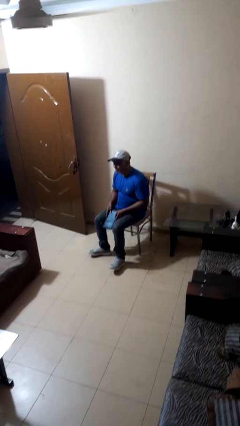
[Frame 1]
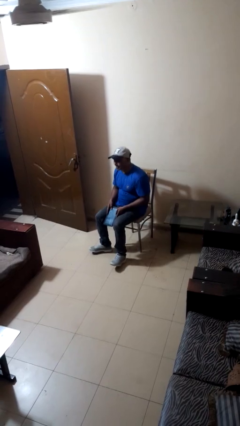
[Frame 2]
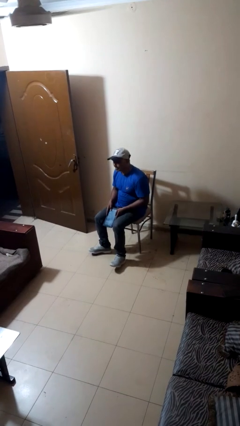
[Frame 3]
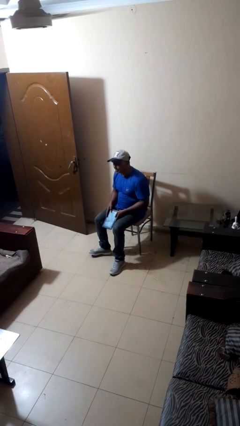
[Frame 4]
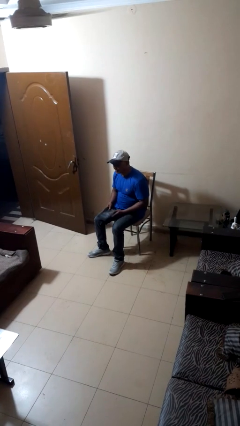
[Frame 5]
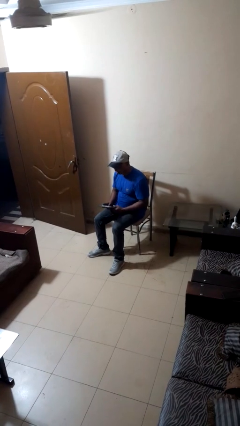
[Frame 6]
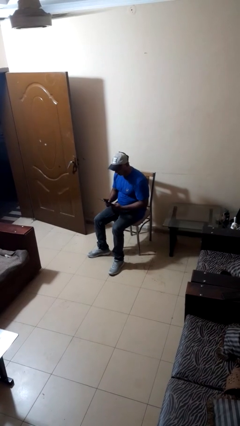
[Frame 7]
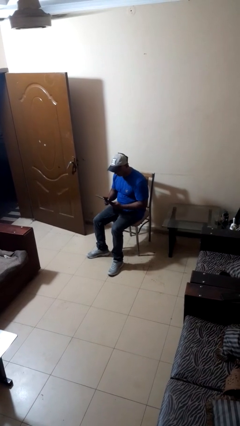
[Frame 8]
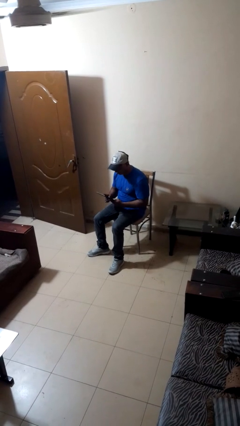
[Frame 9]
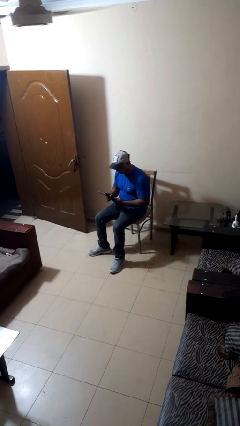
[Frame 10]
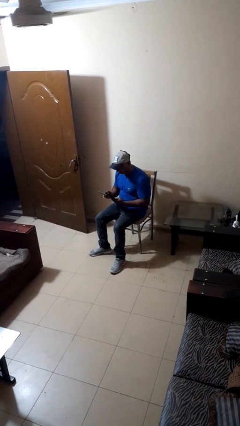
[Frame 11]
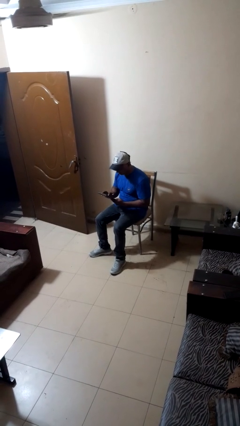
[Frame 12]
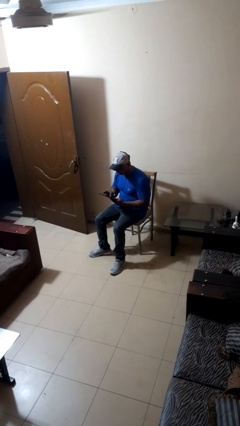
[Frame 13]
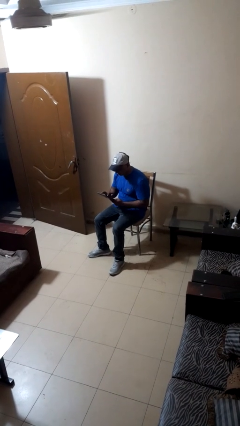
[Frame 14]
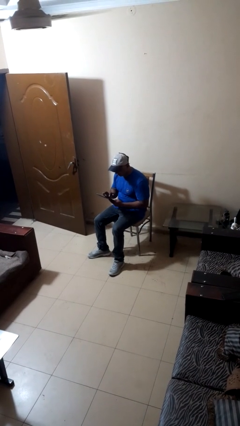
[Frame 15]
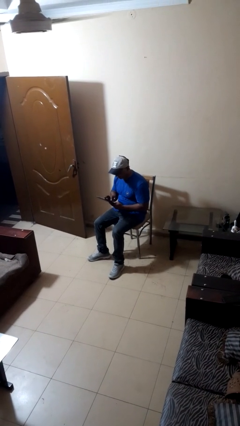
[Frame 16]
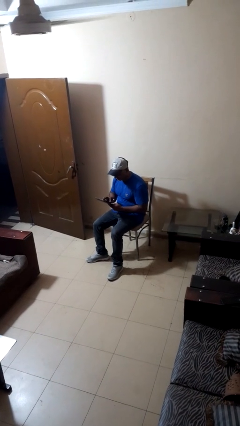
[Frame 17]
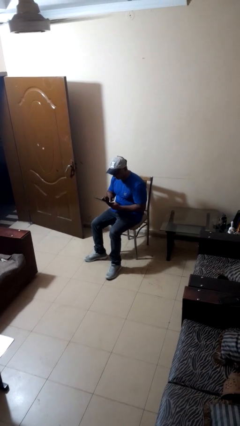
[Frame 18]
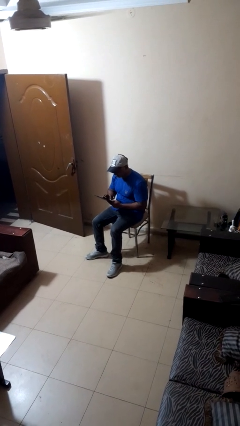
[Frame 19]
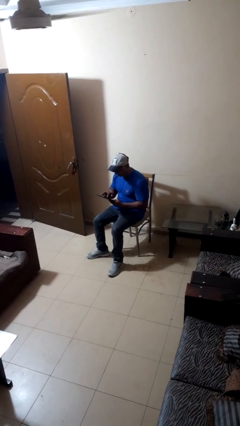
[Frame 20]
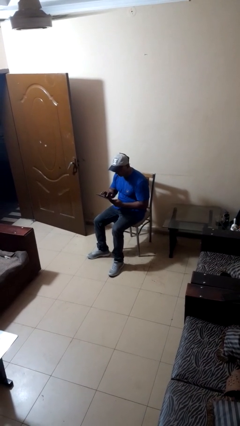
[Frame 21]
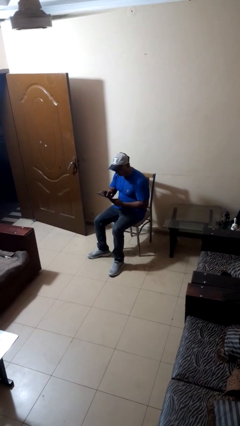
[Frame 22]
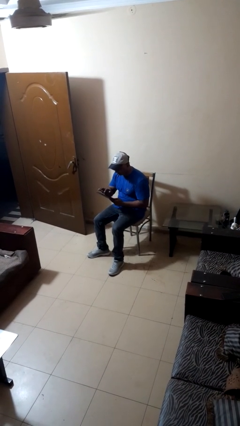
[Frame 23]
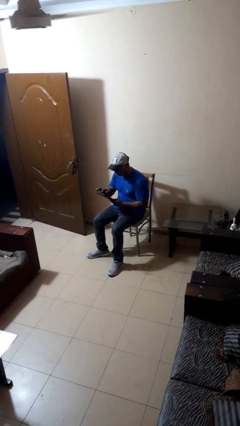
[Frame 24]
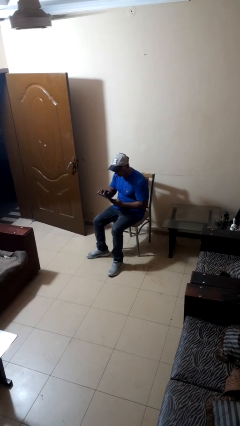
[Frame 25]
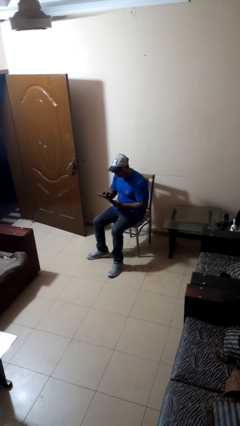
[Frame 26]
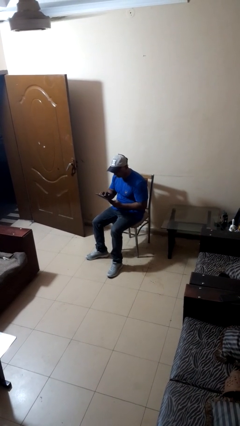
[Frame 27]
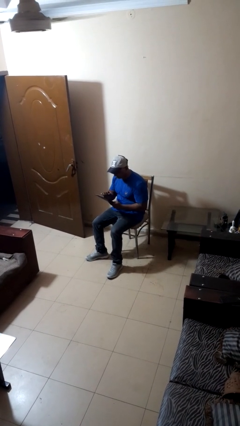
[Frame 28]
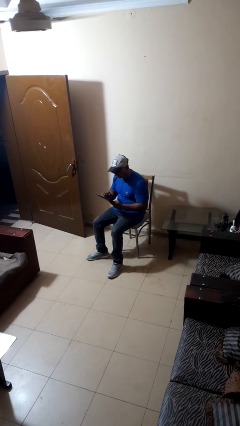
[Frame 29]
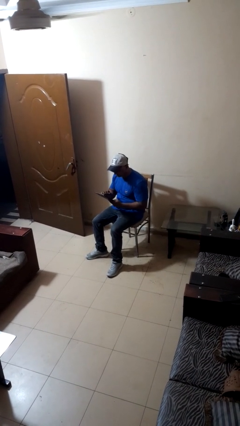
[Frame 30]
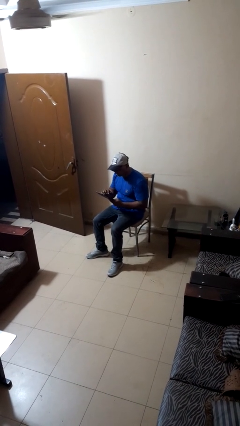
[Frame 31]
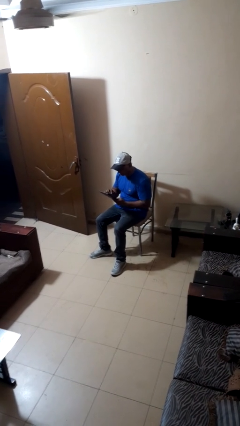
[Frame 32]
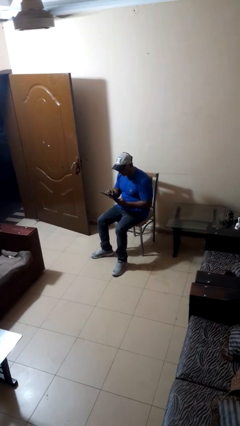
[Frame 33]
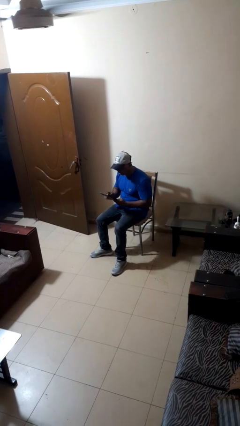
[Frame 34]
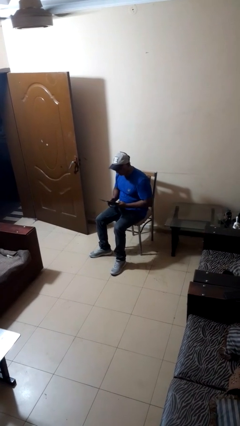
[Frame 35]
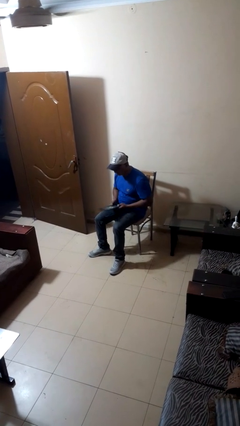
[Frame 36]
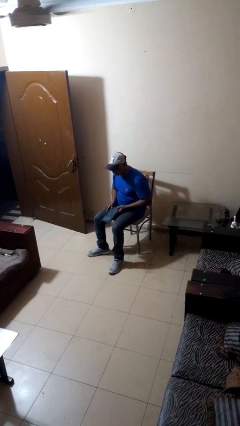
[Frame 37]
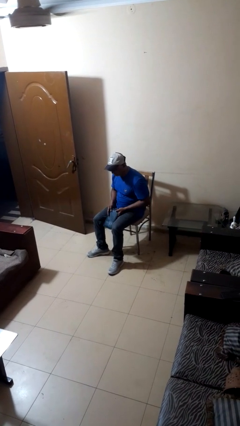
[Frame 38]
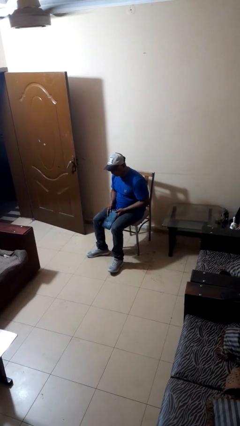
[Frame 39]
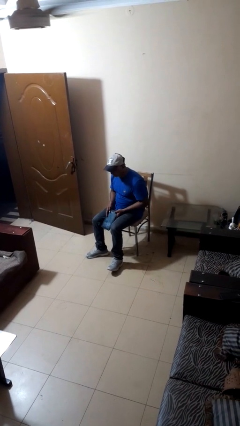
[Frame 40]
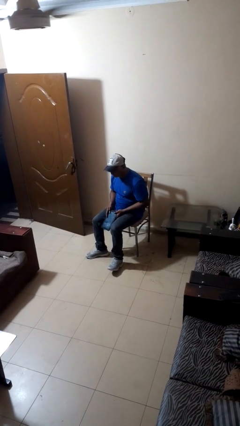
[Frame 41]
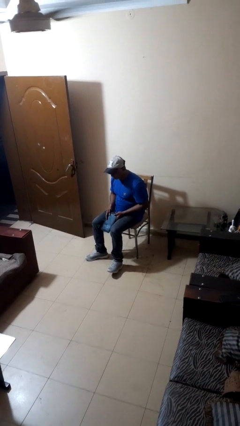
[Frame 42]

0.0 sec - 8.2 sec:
person interacts with tablet

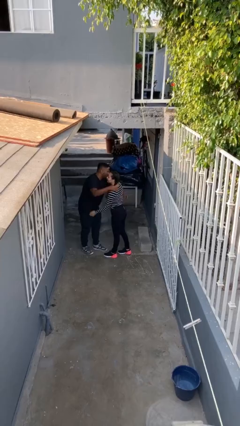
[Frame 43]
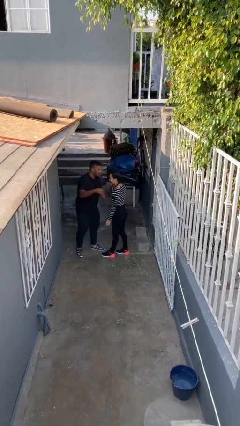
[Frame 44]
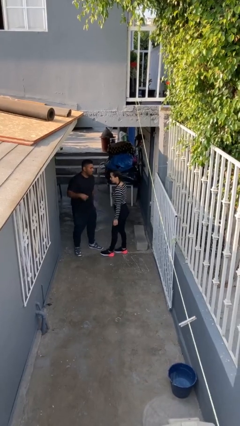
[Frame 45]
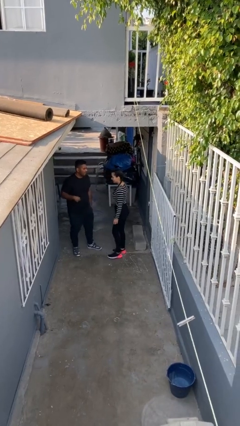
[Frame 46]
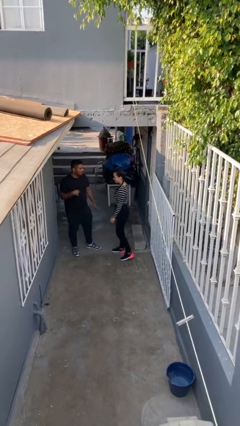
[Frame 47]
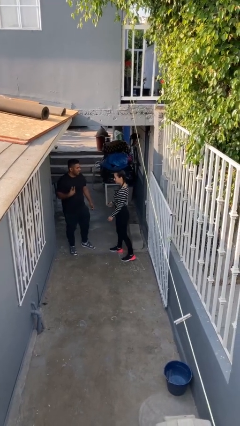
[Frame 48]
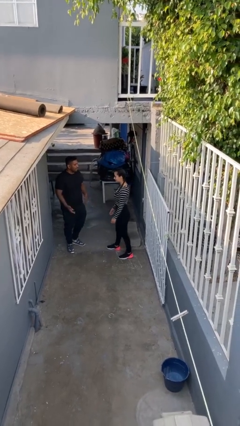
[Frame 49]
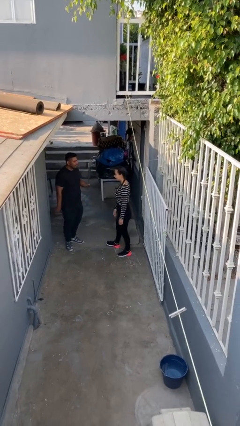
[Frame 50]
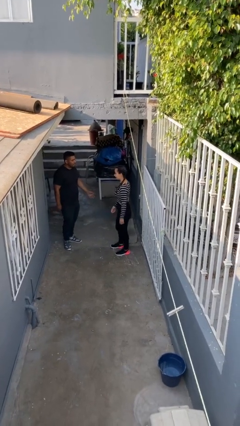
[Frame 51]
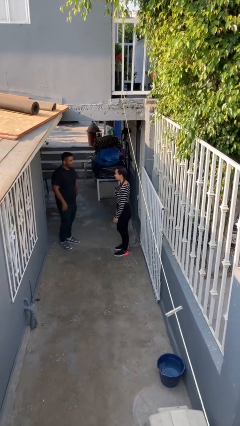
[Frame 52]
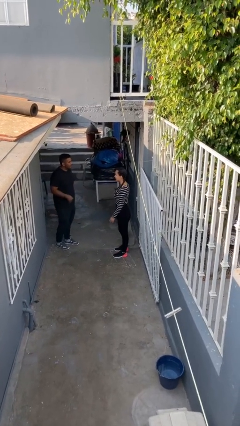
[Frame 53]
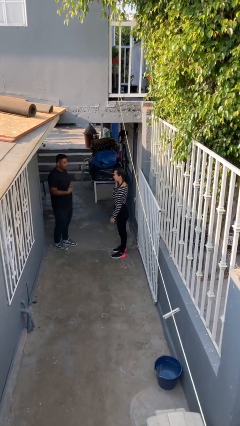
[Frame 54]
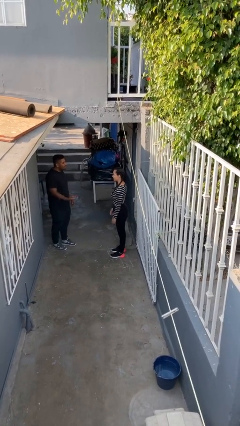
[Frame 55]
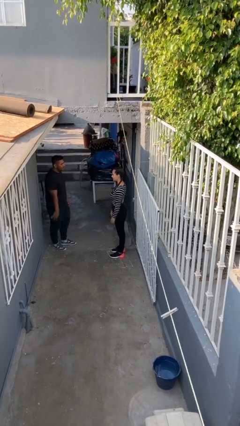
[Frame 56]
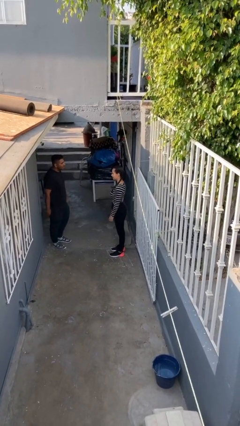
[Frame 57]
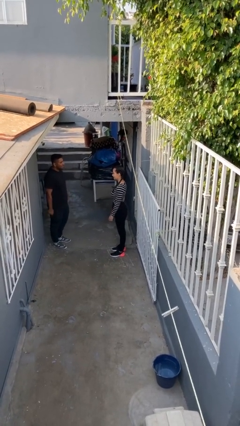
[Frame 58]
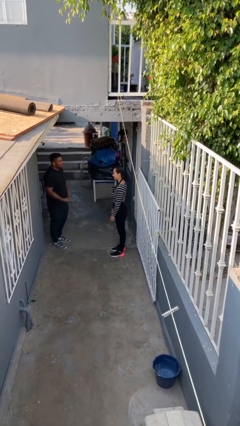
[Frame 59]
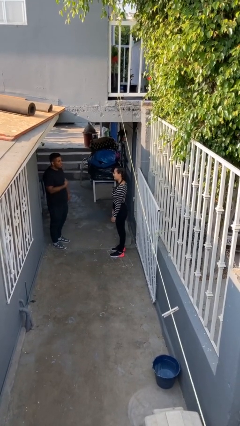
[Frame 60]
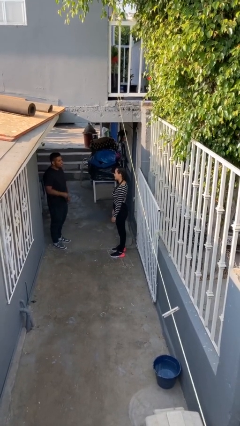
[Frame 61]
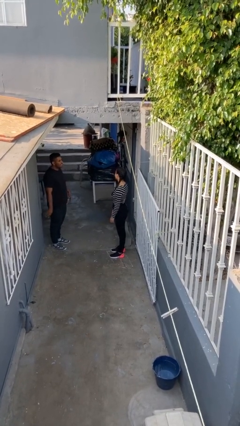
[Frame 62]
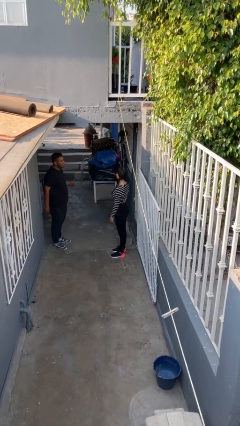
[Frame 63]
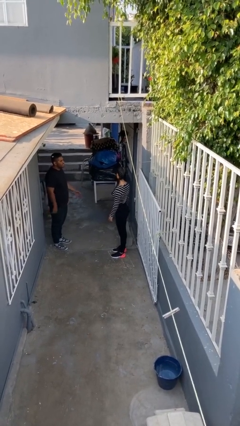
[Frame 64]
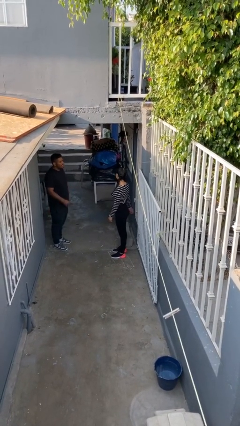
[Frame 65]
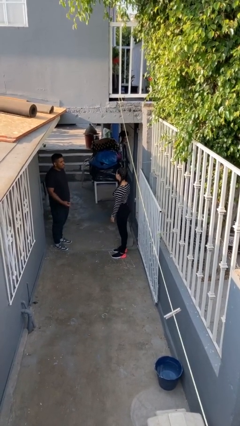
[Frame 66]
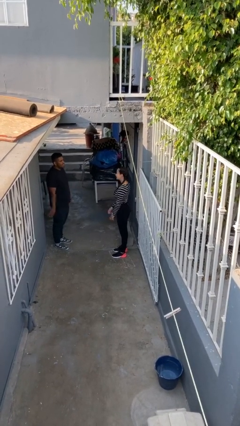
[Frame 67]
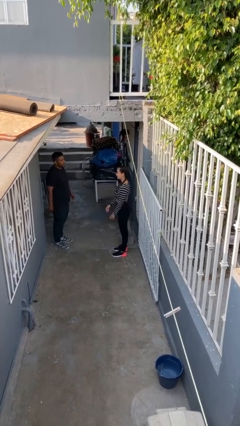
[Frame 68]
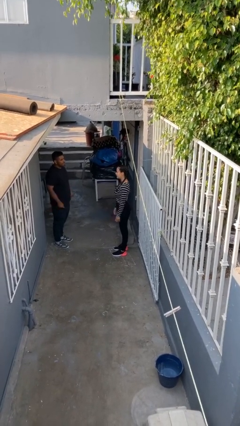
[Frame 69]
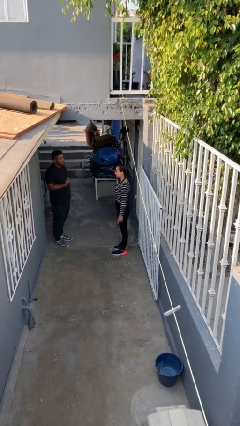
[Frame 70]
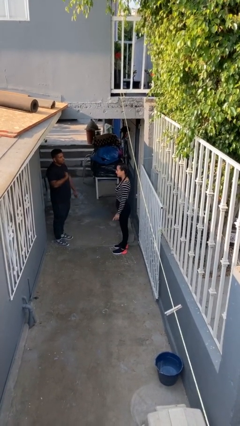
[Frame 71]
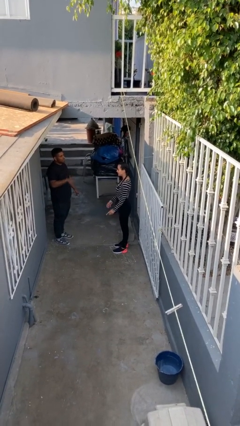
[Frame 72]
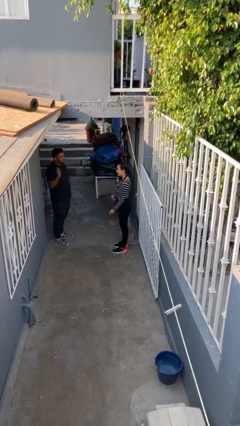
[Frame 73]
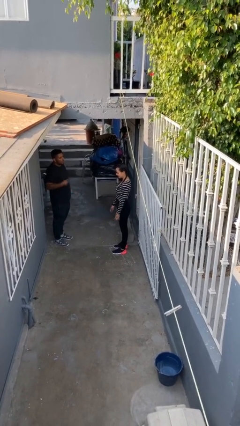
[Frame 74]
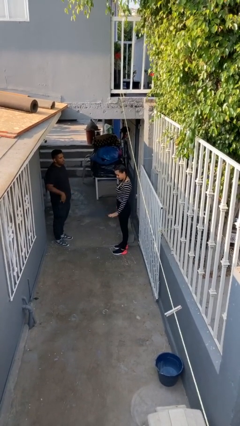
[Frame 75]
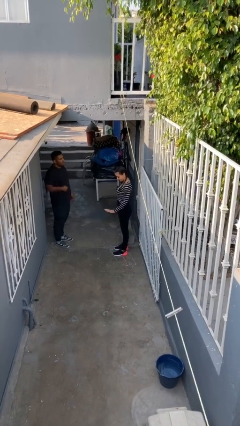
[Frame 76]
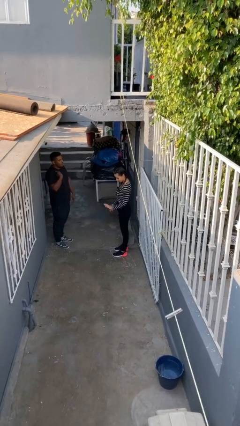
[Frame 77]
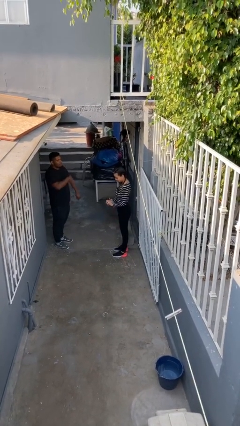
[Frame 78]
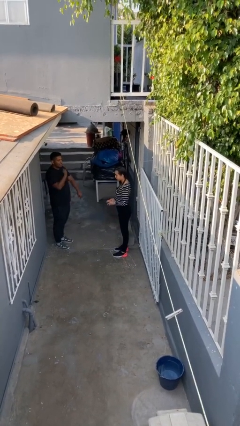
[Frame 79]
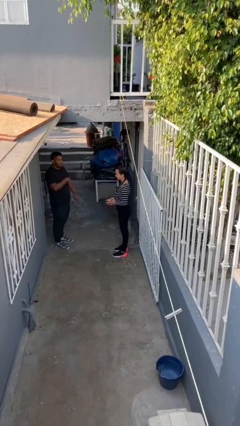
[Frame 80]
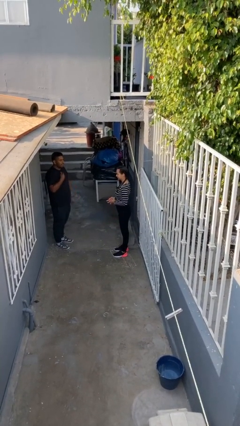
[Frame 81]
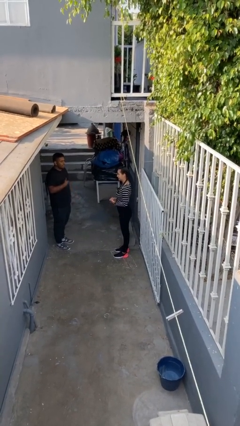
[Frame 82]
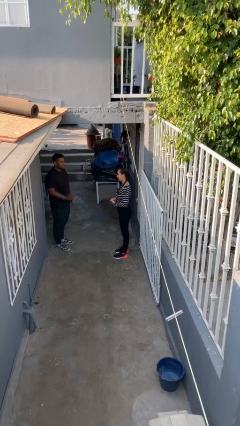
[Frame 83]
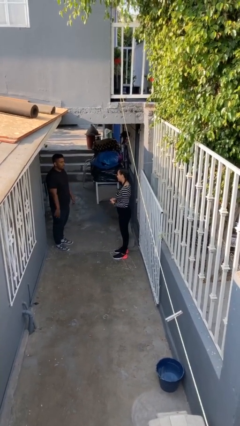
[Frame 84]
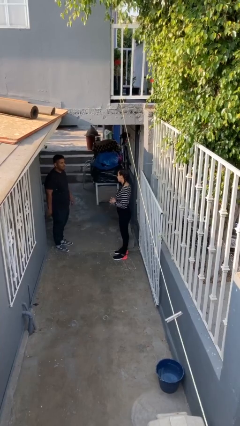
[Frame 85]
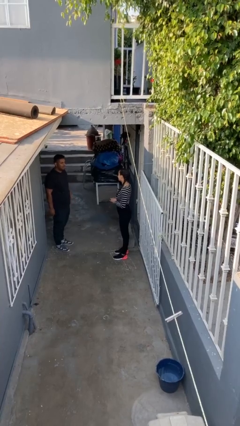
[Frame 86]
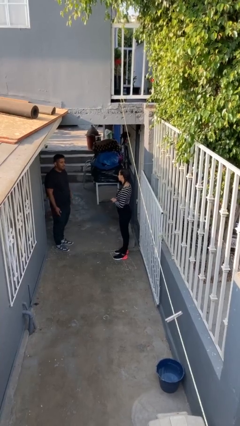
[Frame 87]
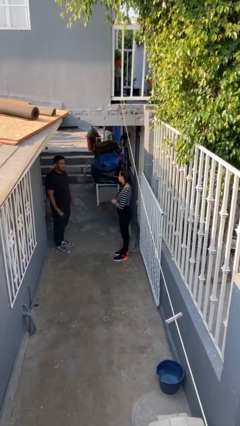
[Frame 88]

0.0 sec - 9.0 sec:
person talks to person

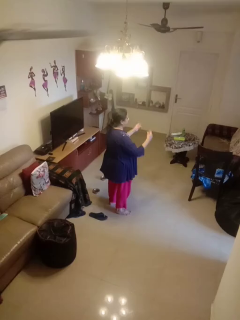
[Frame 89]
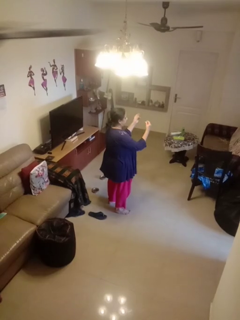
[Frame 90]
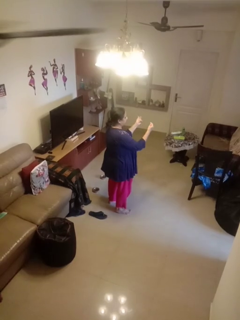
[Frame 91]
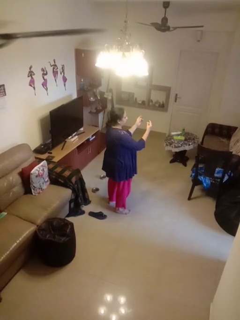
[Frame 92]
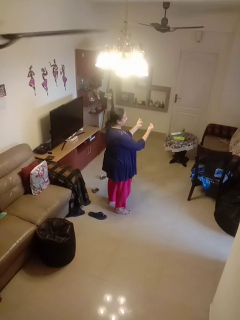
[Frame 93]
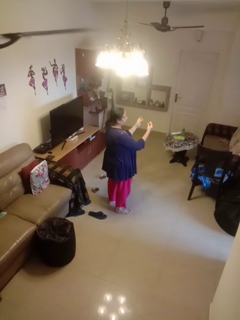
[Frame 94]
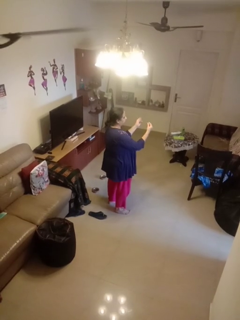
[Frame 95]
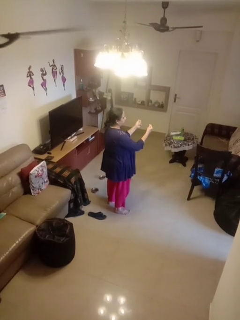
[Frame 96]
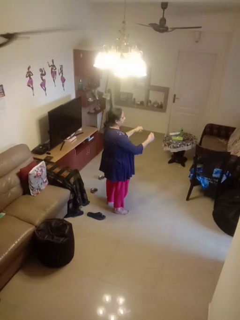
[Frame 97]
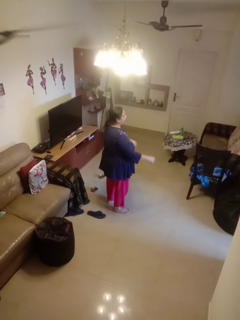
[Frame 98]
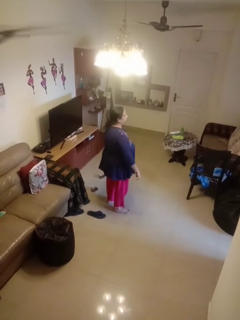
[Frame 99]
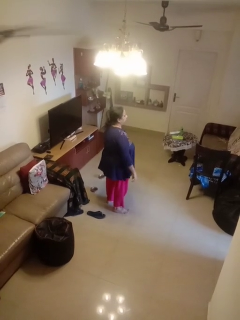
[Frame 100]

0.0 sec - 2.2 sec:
person snaps fingers
